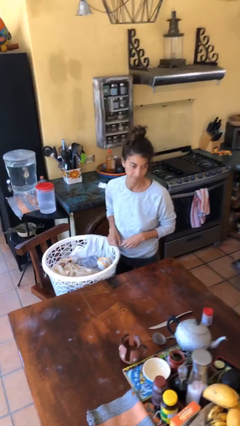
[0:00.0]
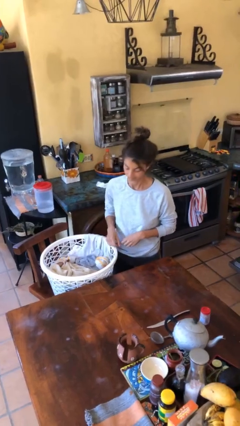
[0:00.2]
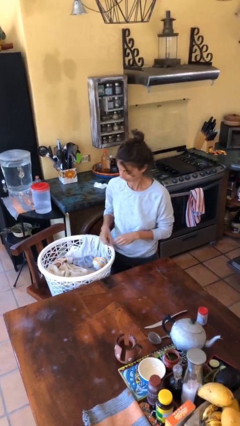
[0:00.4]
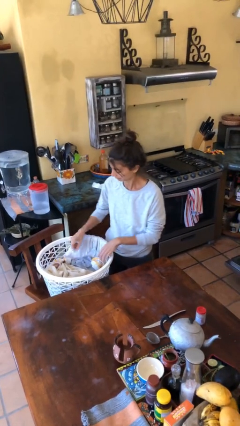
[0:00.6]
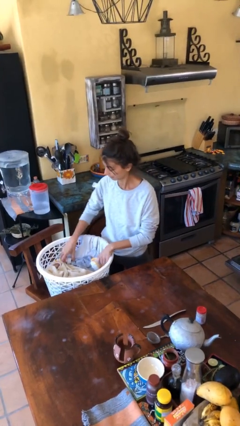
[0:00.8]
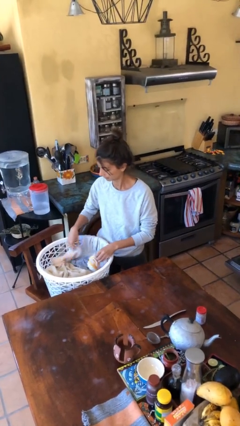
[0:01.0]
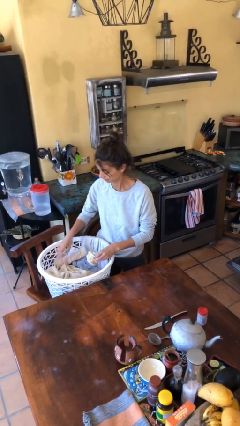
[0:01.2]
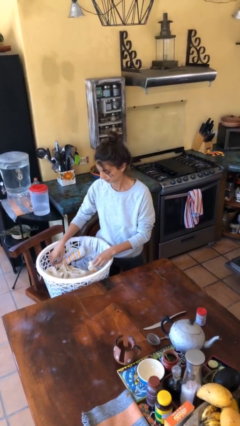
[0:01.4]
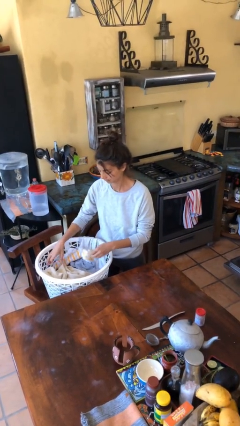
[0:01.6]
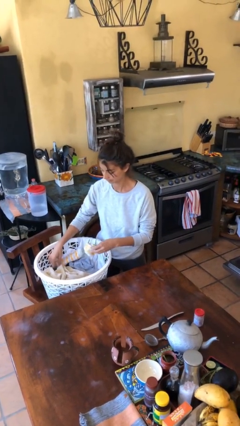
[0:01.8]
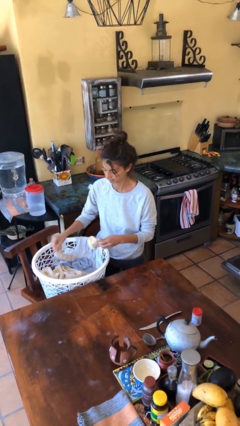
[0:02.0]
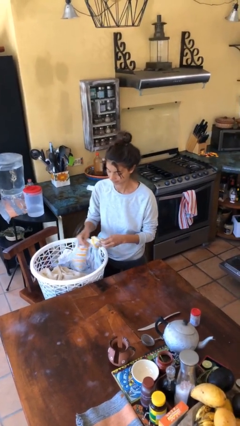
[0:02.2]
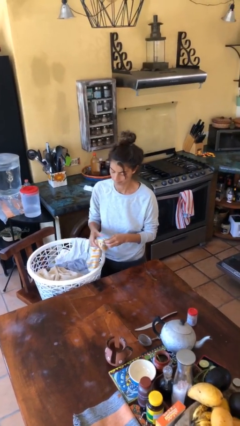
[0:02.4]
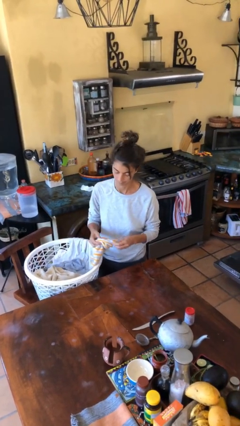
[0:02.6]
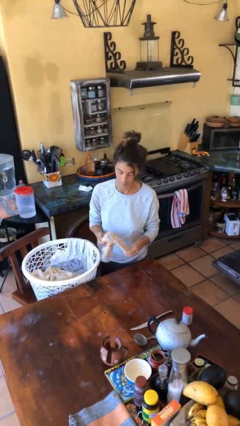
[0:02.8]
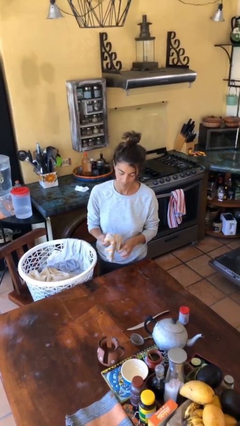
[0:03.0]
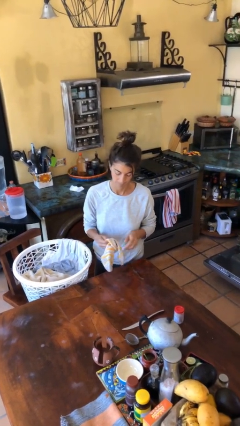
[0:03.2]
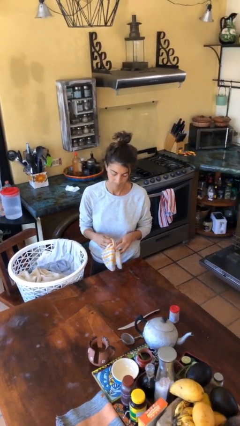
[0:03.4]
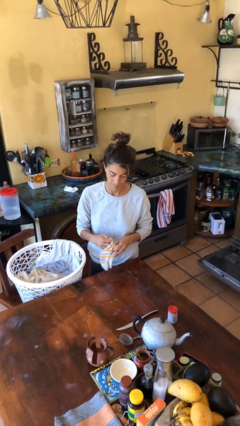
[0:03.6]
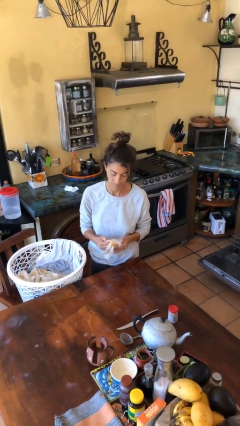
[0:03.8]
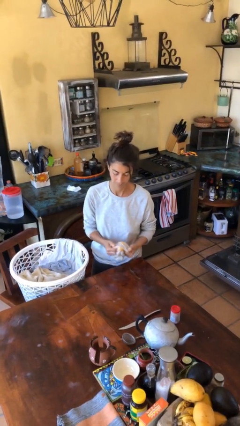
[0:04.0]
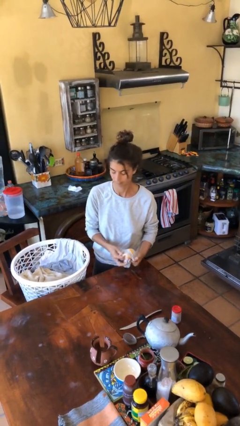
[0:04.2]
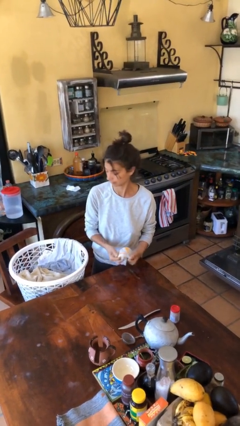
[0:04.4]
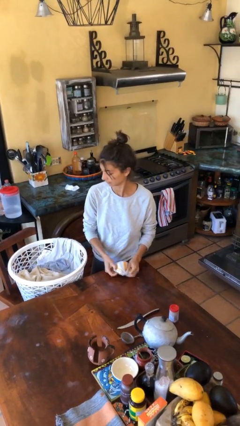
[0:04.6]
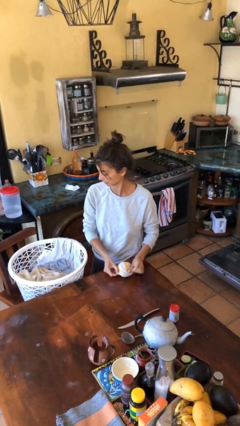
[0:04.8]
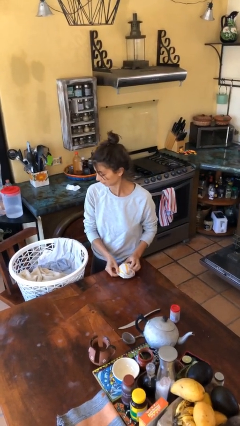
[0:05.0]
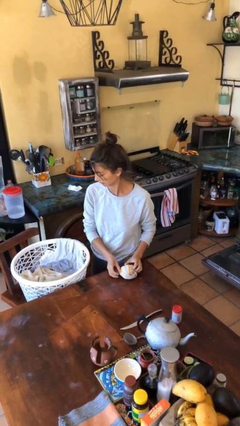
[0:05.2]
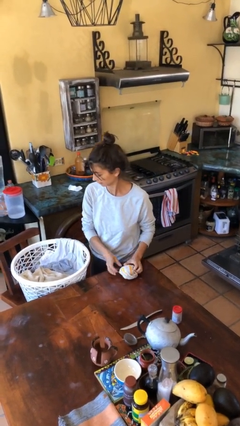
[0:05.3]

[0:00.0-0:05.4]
person folds socks

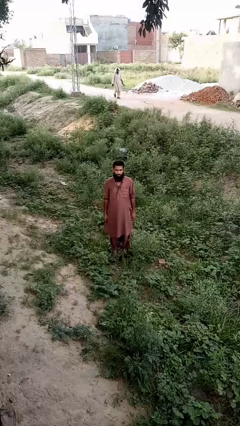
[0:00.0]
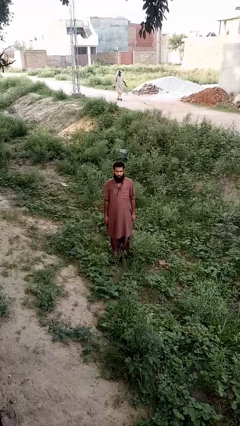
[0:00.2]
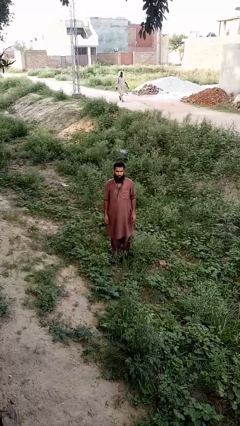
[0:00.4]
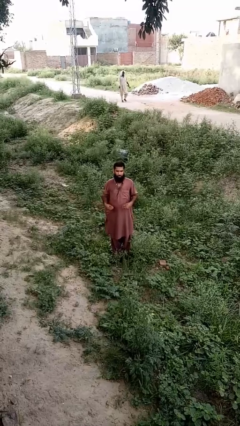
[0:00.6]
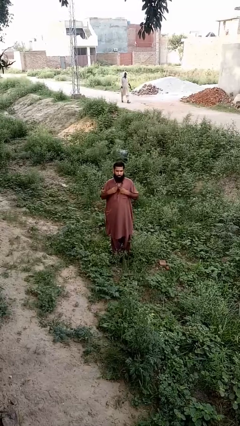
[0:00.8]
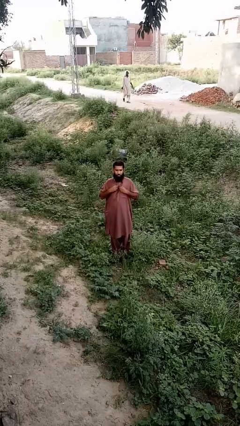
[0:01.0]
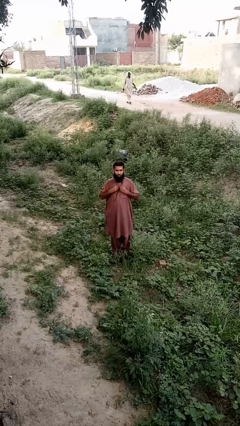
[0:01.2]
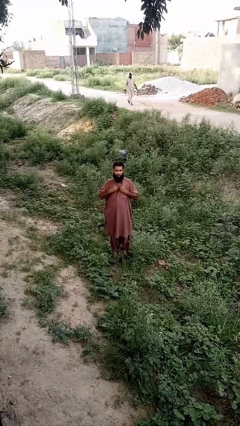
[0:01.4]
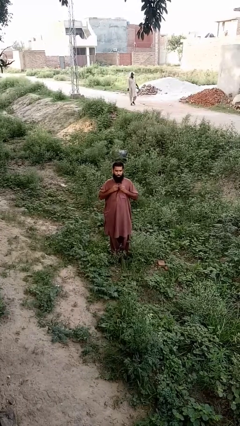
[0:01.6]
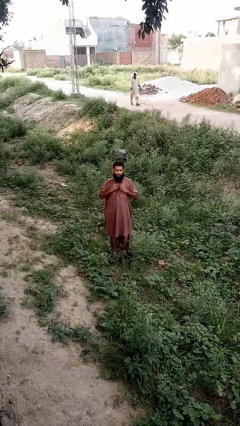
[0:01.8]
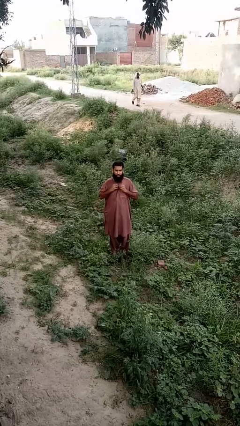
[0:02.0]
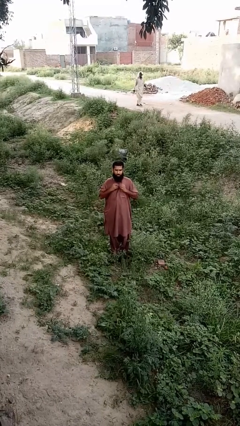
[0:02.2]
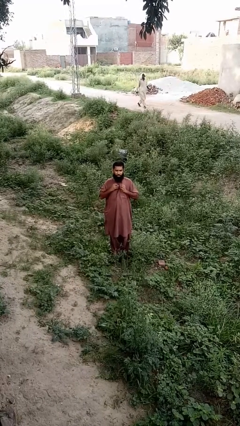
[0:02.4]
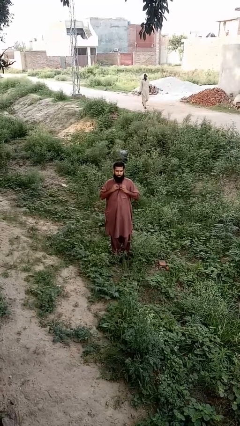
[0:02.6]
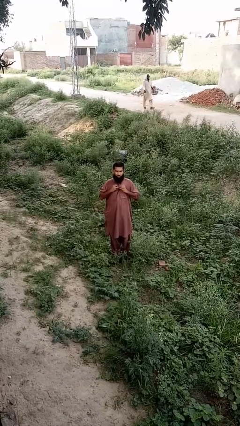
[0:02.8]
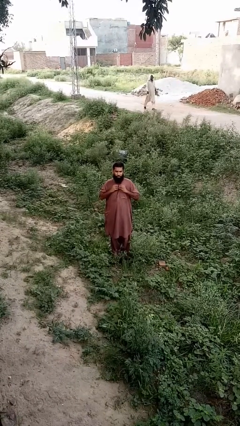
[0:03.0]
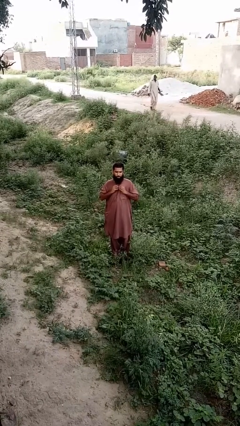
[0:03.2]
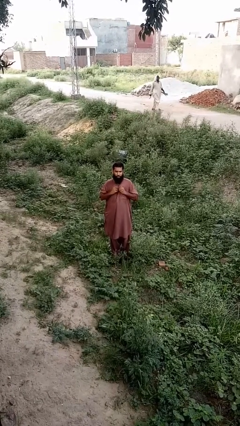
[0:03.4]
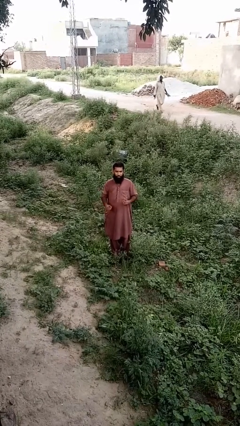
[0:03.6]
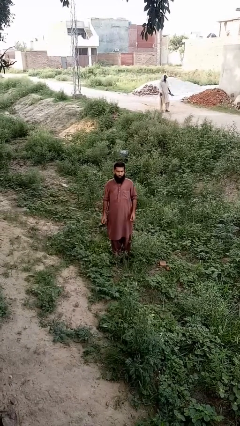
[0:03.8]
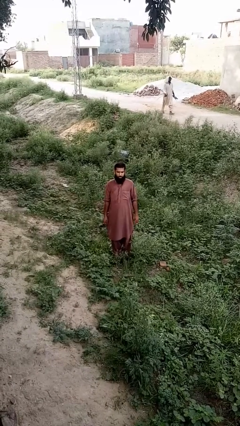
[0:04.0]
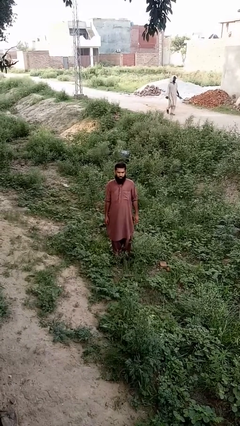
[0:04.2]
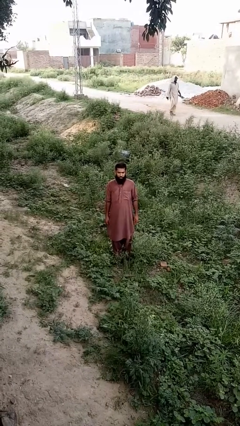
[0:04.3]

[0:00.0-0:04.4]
person buttons shirt

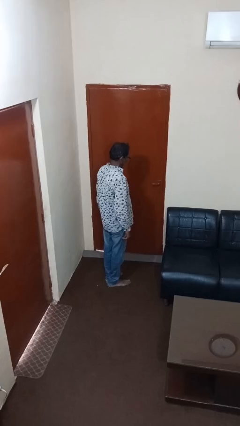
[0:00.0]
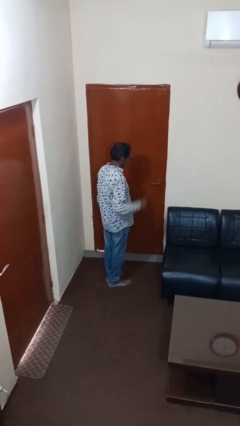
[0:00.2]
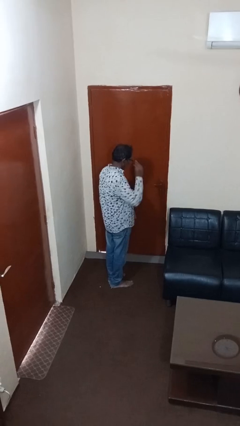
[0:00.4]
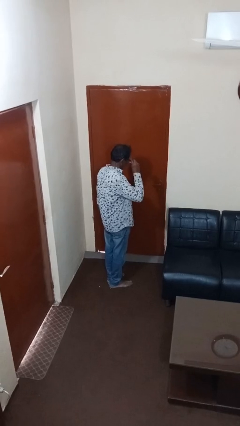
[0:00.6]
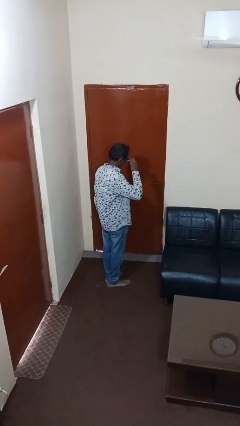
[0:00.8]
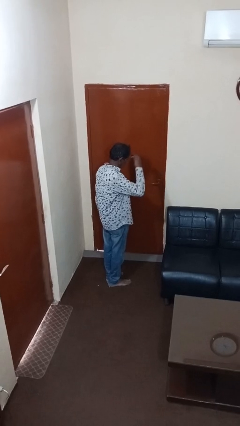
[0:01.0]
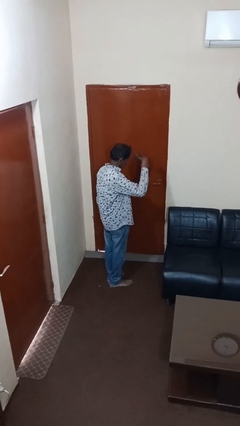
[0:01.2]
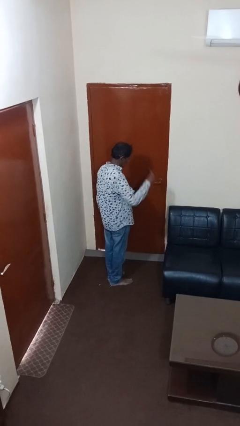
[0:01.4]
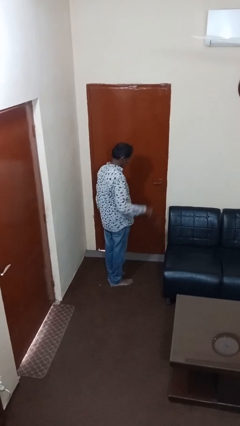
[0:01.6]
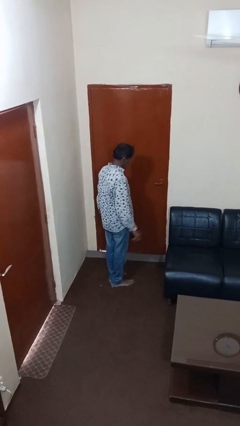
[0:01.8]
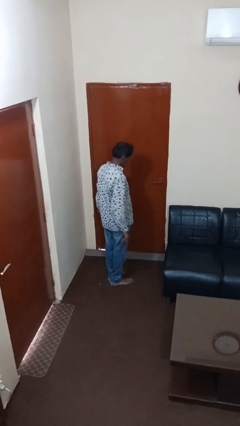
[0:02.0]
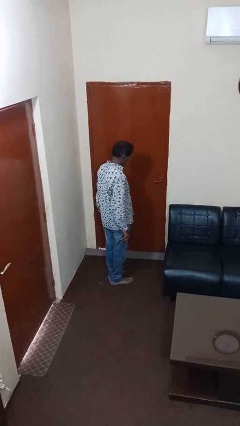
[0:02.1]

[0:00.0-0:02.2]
person takes off glasses

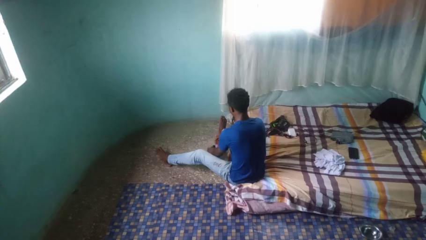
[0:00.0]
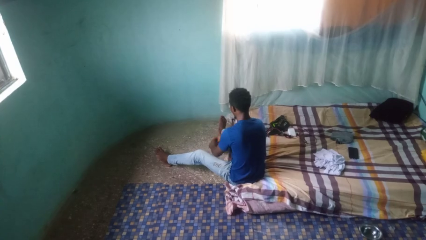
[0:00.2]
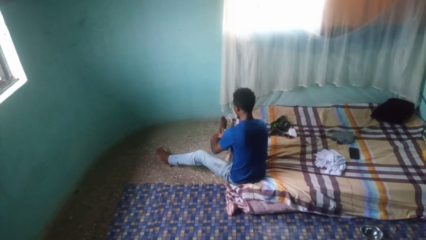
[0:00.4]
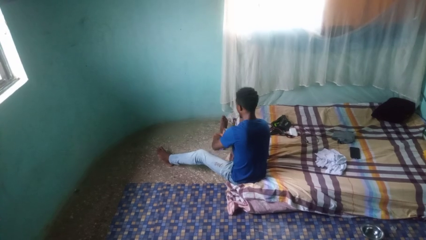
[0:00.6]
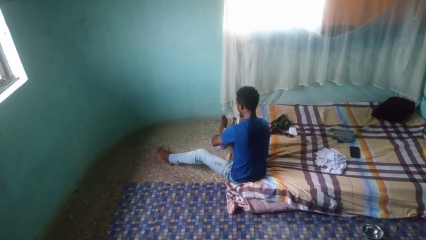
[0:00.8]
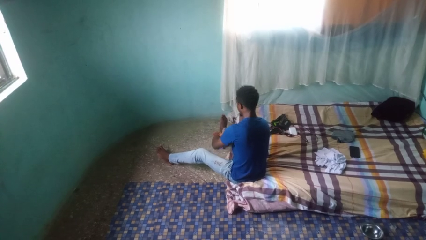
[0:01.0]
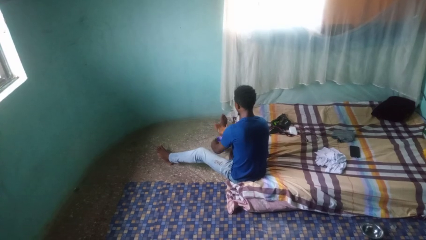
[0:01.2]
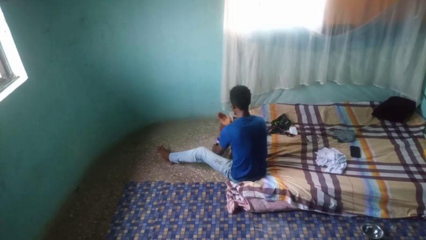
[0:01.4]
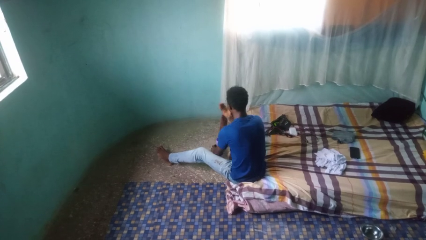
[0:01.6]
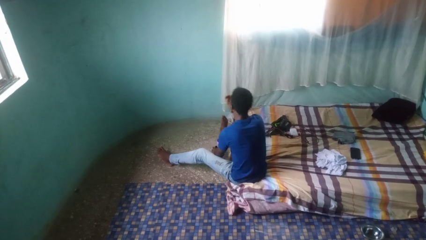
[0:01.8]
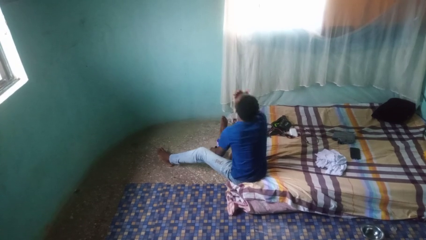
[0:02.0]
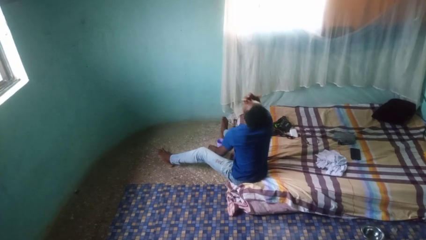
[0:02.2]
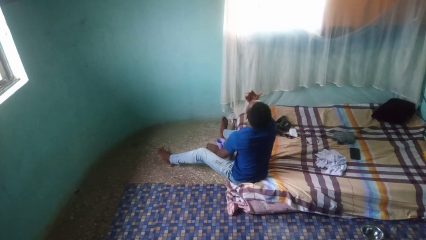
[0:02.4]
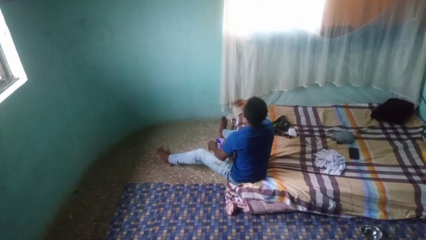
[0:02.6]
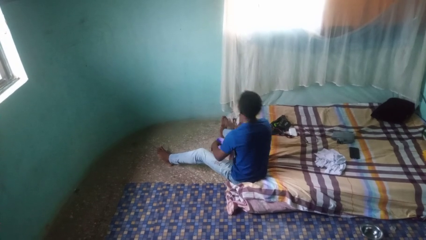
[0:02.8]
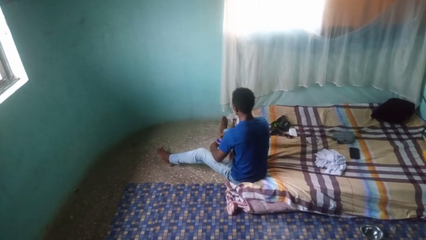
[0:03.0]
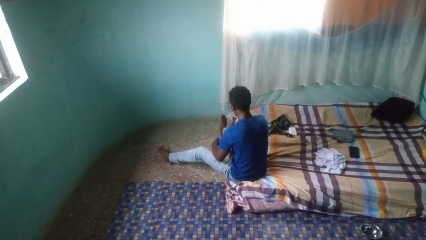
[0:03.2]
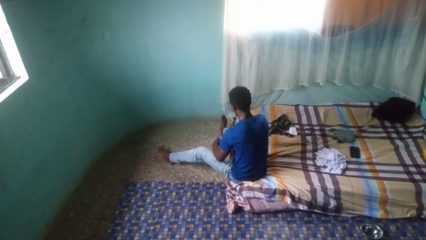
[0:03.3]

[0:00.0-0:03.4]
person takes medicine pills

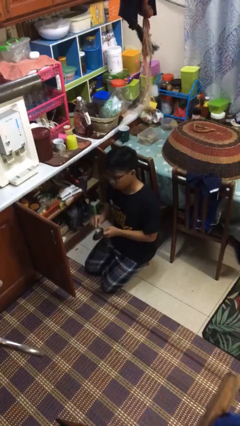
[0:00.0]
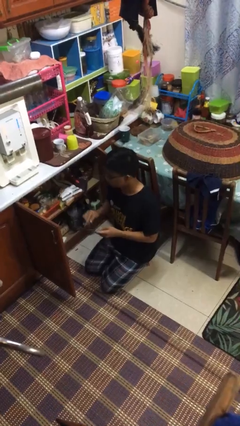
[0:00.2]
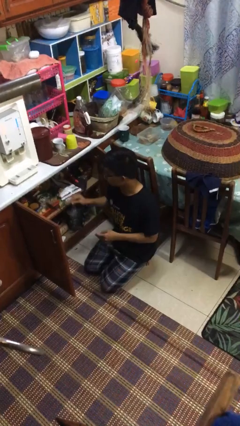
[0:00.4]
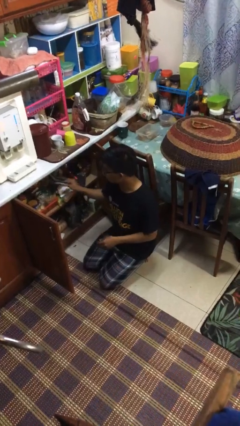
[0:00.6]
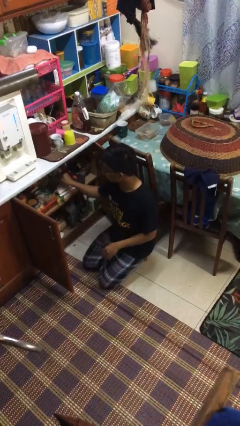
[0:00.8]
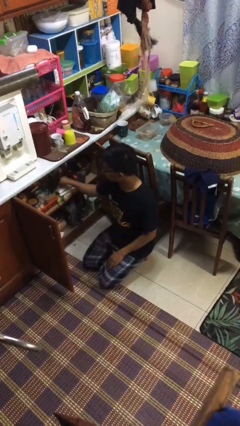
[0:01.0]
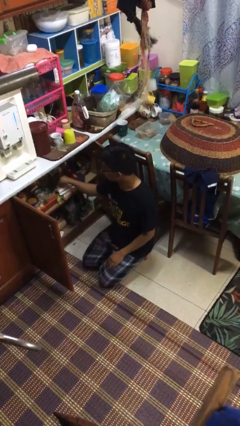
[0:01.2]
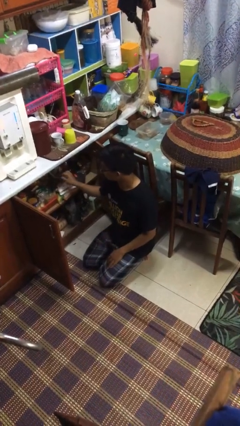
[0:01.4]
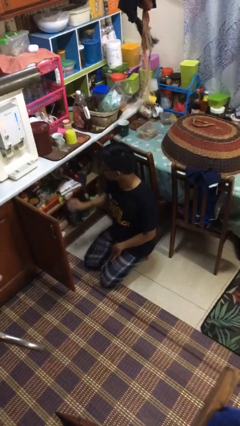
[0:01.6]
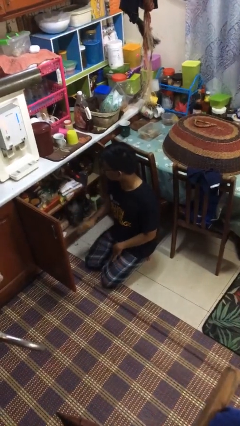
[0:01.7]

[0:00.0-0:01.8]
person puts object into kitchen drawer
